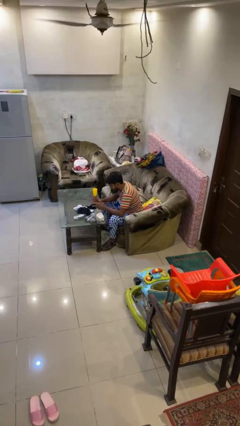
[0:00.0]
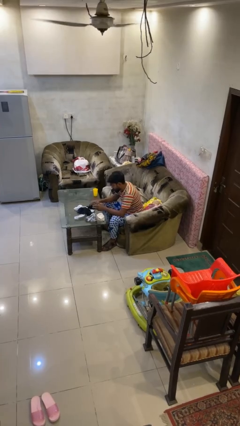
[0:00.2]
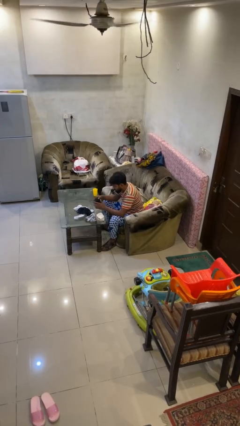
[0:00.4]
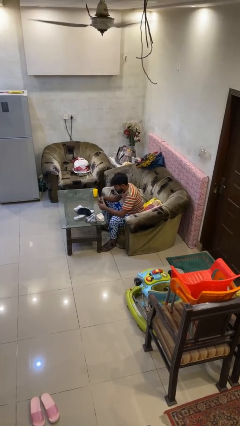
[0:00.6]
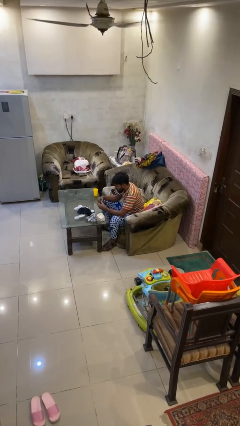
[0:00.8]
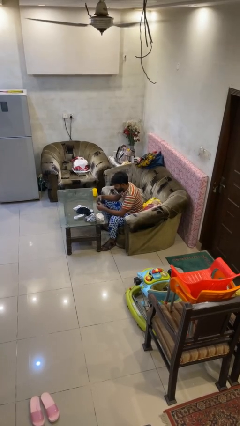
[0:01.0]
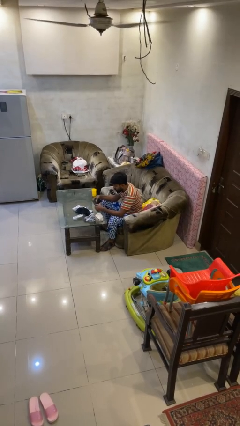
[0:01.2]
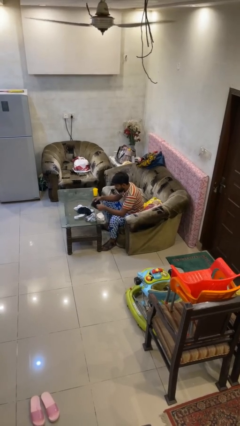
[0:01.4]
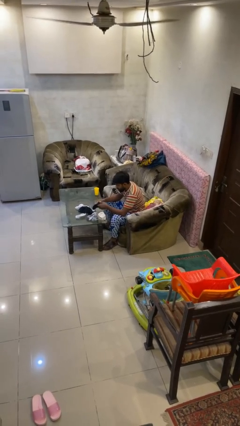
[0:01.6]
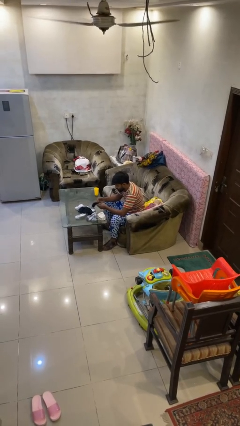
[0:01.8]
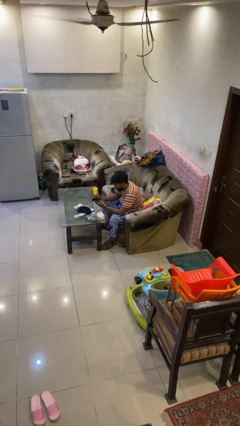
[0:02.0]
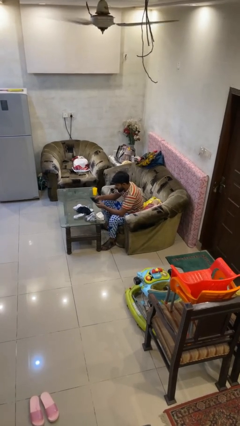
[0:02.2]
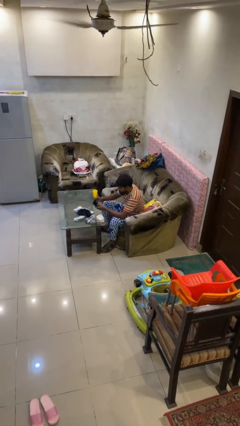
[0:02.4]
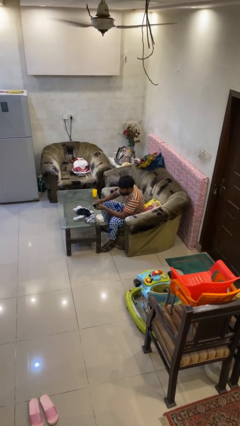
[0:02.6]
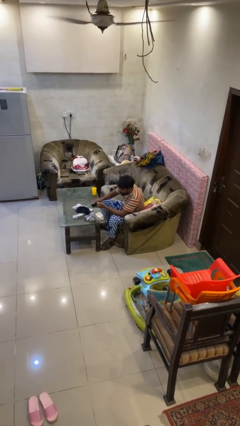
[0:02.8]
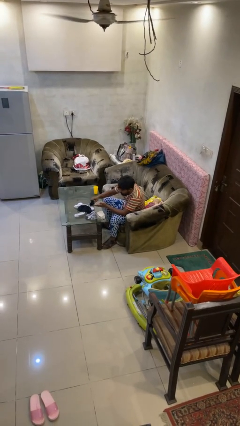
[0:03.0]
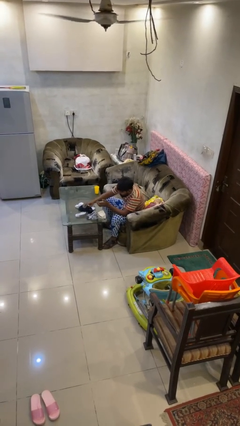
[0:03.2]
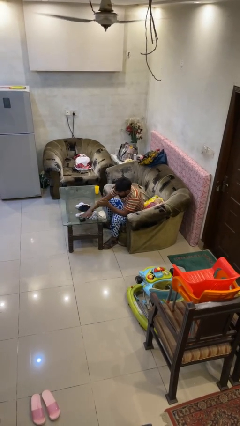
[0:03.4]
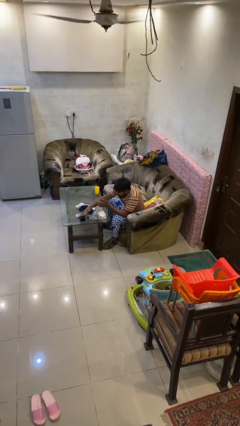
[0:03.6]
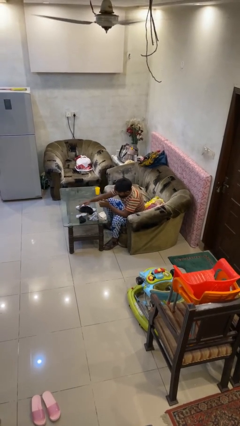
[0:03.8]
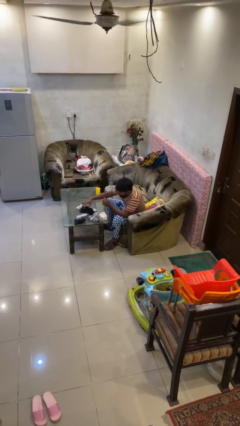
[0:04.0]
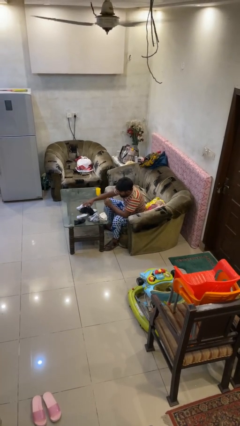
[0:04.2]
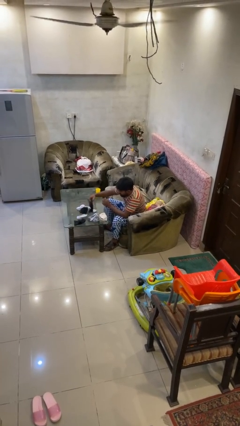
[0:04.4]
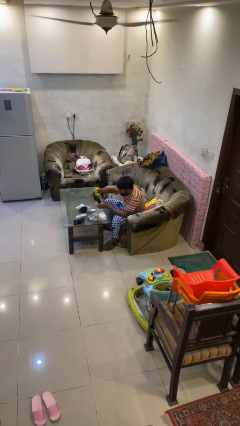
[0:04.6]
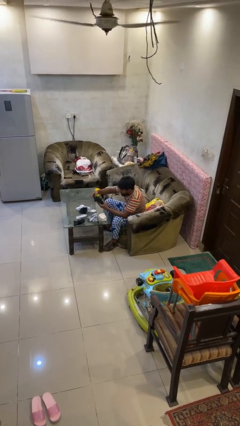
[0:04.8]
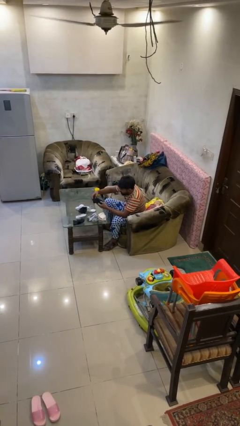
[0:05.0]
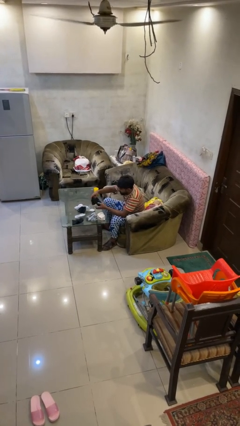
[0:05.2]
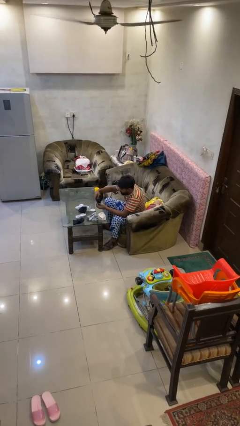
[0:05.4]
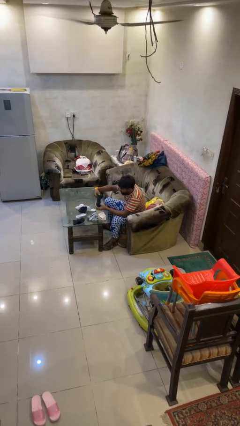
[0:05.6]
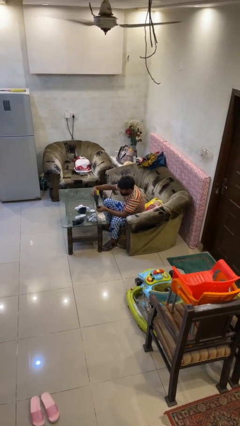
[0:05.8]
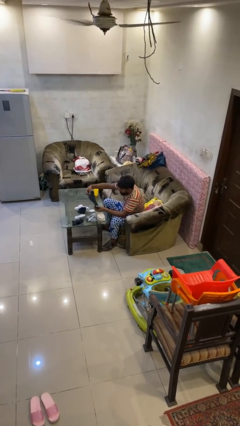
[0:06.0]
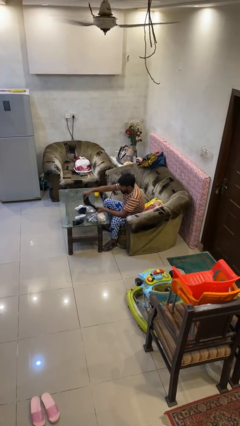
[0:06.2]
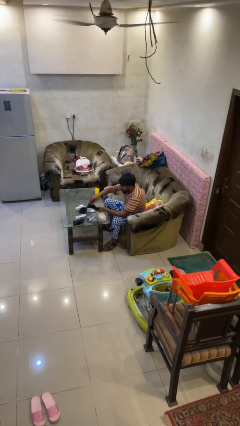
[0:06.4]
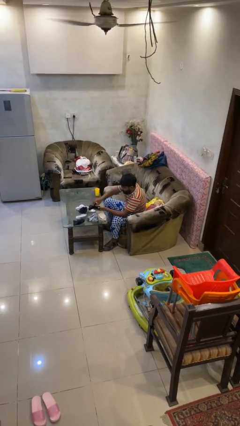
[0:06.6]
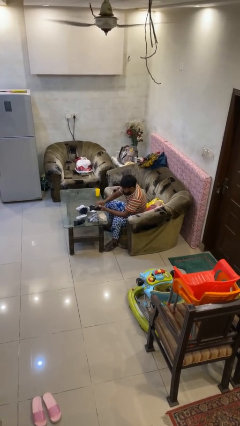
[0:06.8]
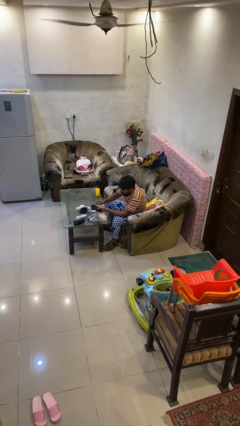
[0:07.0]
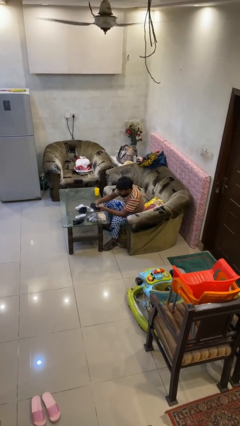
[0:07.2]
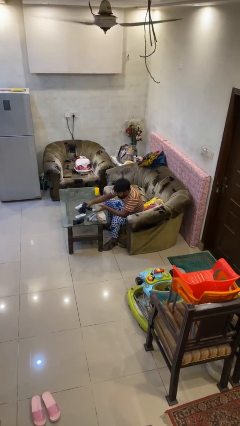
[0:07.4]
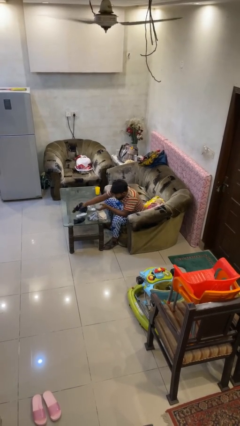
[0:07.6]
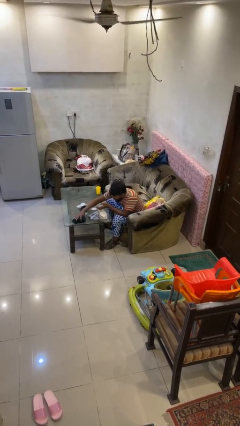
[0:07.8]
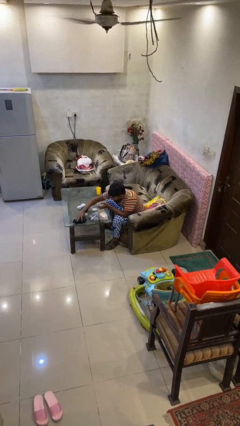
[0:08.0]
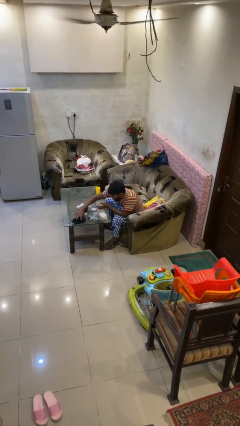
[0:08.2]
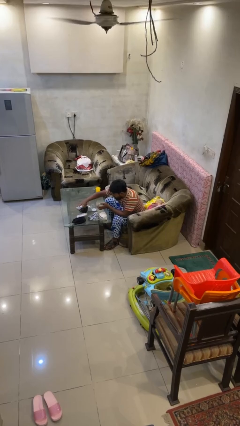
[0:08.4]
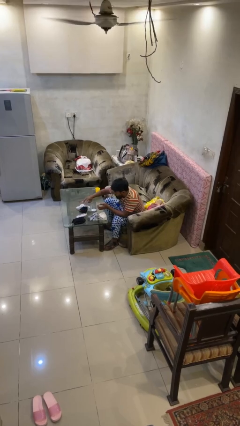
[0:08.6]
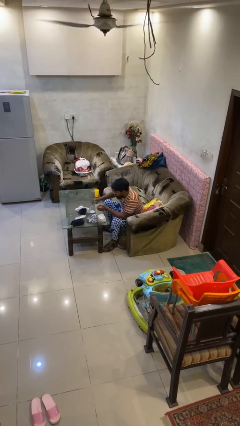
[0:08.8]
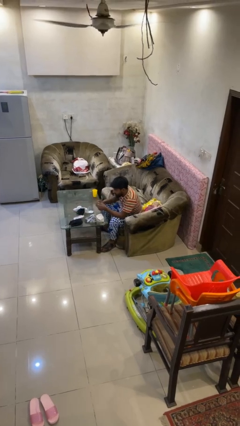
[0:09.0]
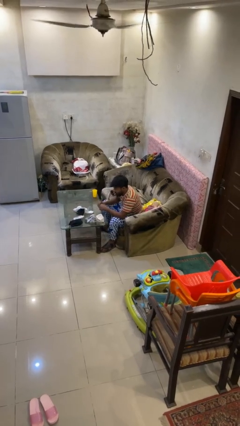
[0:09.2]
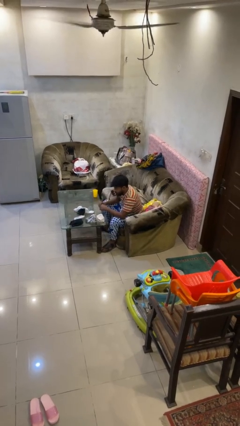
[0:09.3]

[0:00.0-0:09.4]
person folds socks

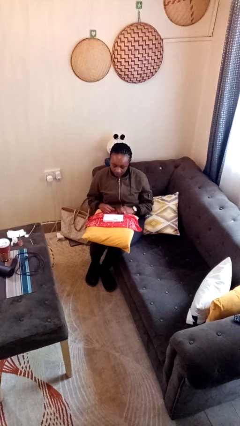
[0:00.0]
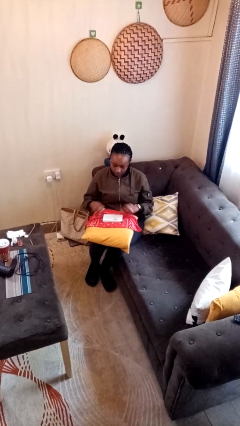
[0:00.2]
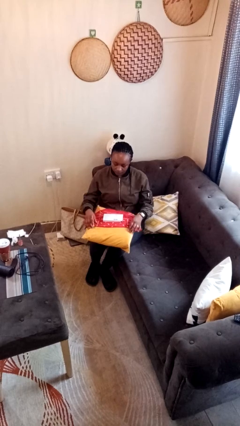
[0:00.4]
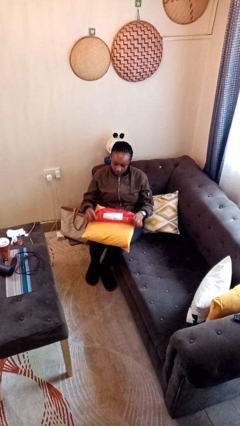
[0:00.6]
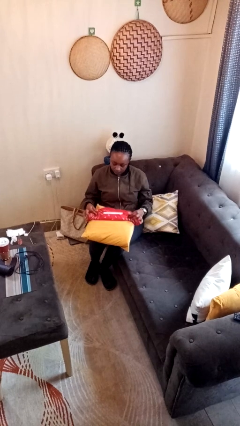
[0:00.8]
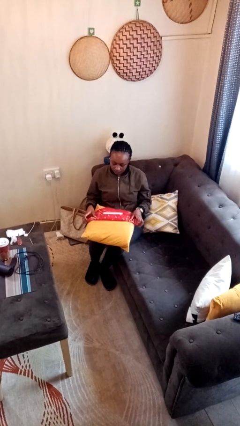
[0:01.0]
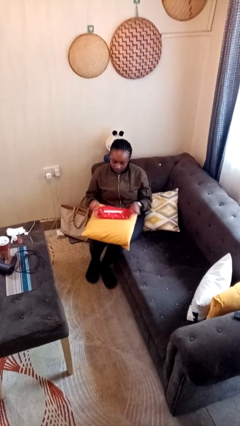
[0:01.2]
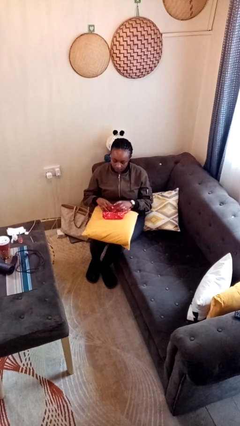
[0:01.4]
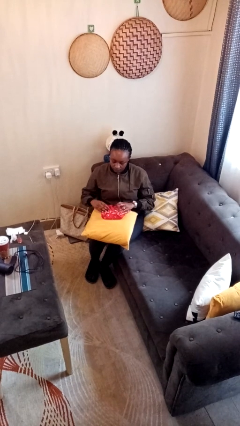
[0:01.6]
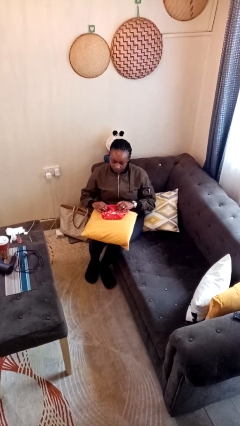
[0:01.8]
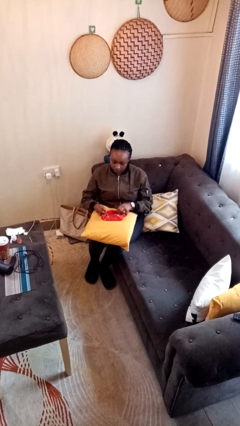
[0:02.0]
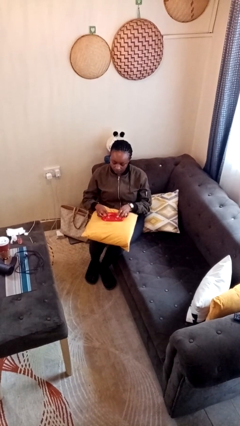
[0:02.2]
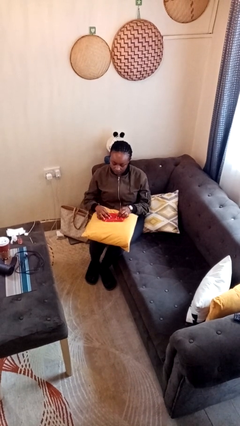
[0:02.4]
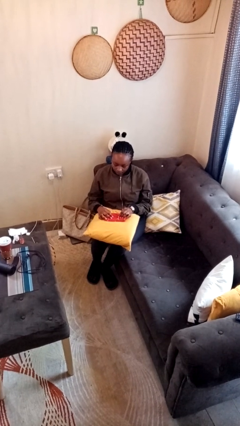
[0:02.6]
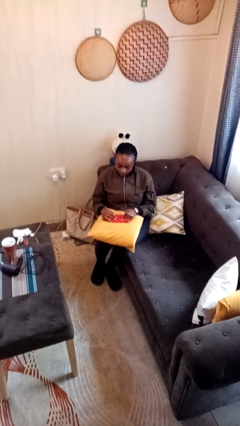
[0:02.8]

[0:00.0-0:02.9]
person wraps box

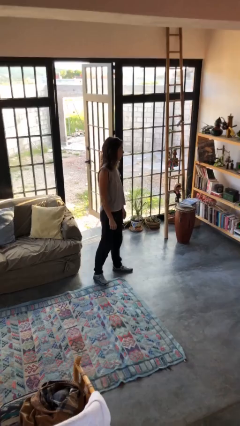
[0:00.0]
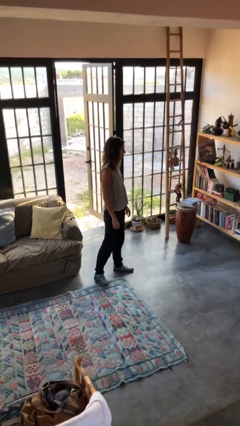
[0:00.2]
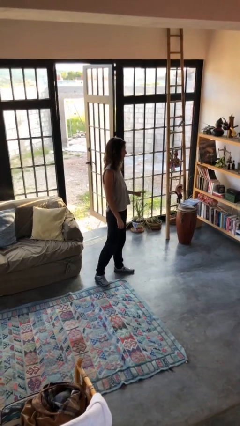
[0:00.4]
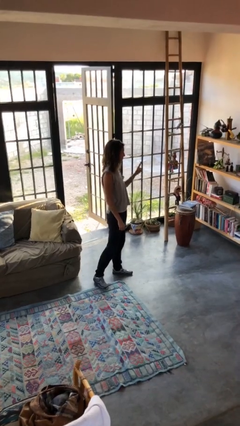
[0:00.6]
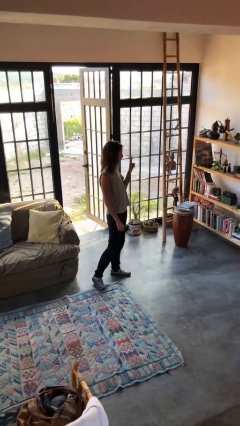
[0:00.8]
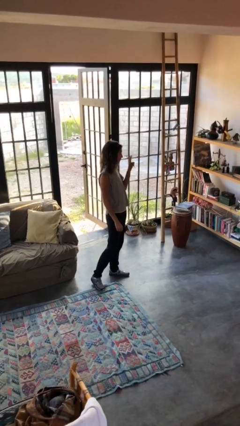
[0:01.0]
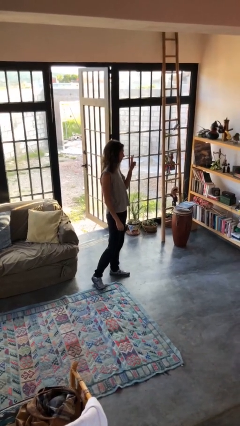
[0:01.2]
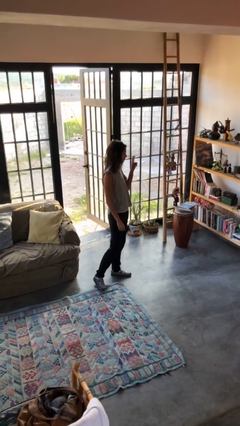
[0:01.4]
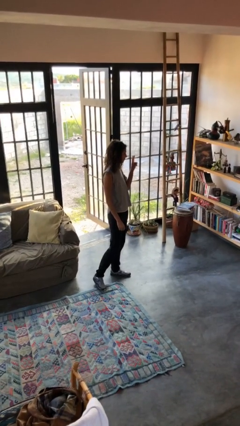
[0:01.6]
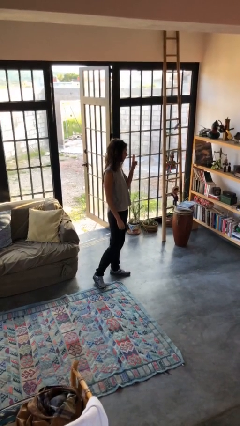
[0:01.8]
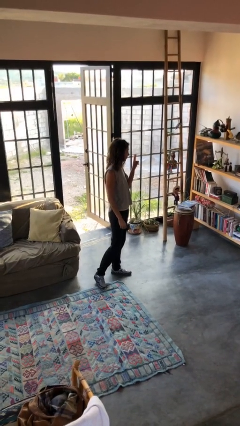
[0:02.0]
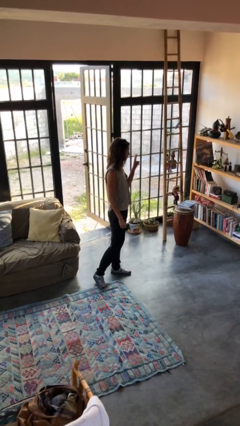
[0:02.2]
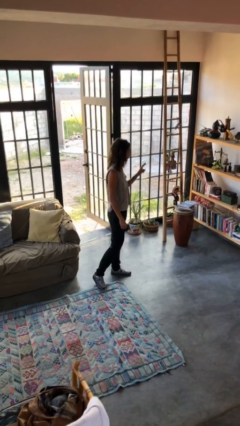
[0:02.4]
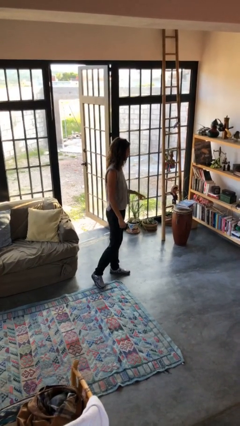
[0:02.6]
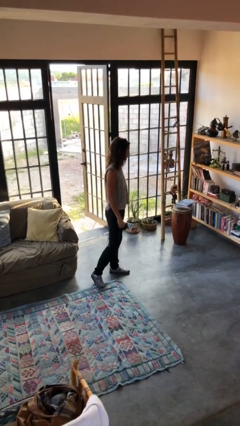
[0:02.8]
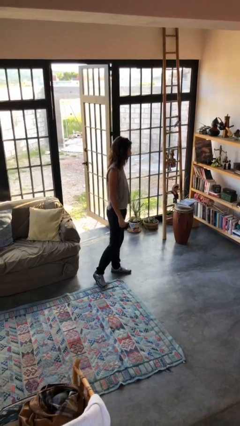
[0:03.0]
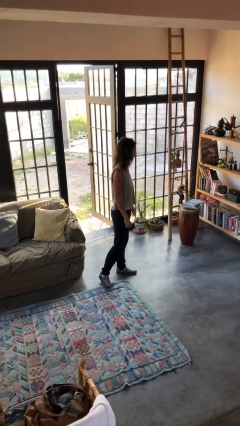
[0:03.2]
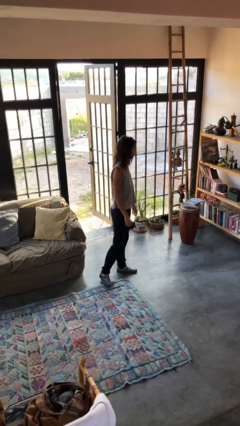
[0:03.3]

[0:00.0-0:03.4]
person gestures peace

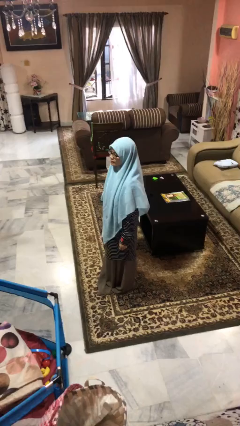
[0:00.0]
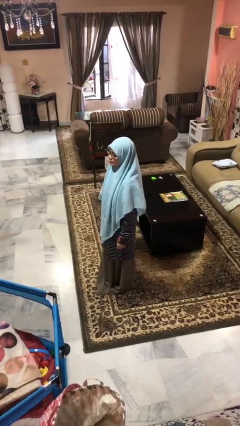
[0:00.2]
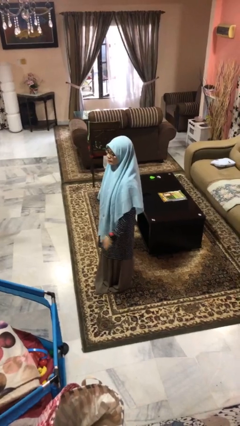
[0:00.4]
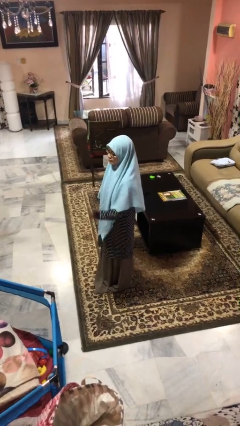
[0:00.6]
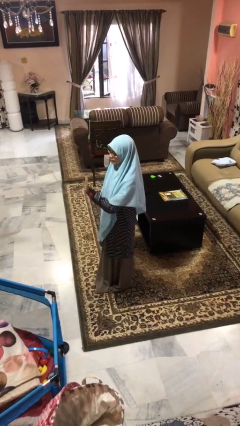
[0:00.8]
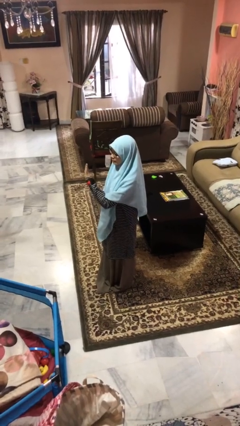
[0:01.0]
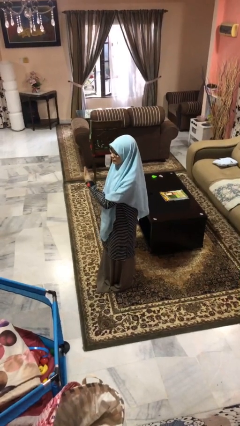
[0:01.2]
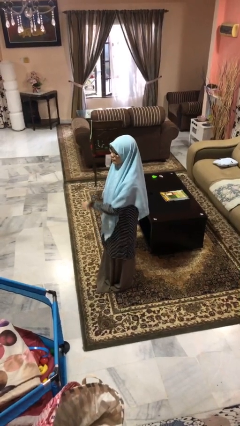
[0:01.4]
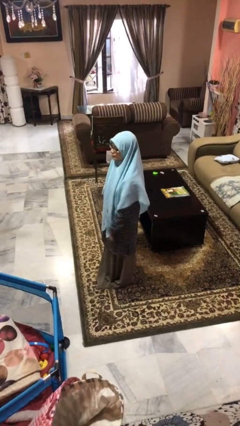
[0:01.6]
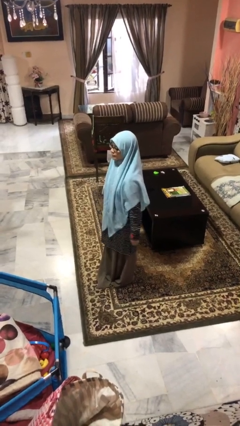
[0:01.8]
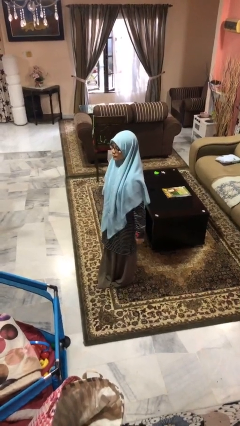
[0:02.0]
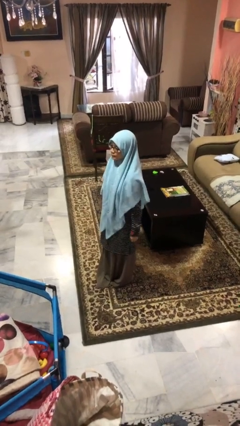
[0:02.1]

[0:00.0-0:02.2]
person gestures swipe right
